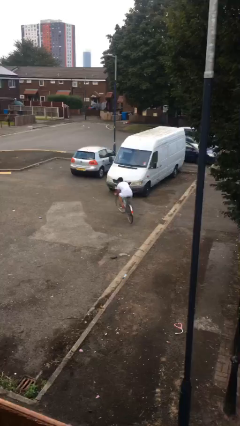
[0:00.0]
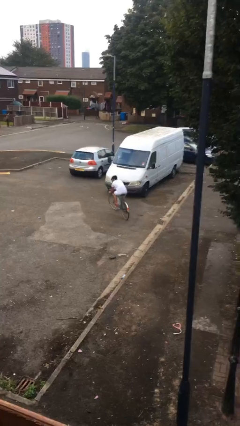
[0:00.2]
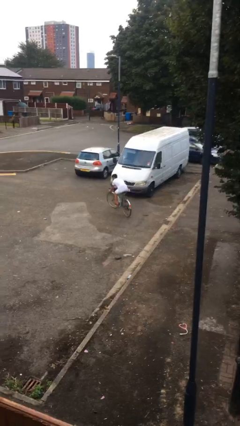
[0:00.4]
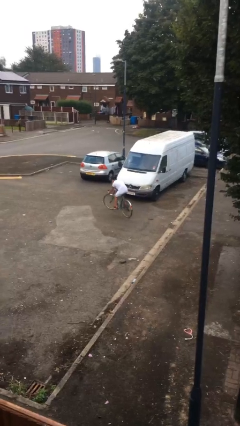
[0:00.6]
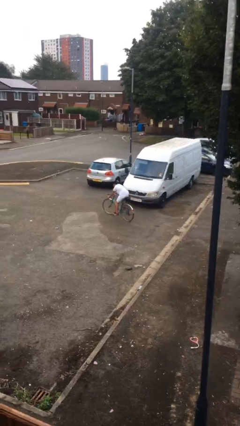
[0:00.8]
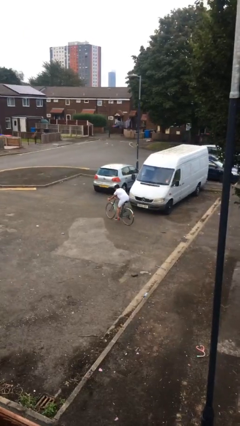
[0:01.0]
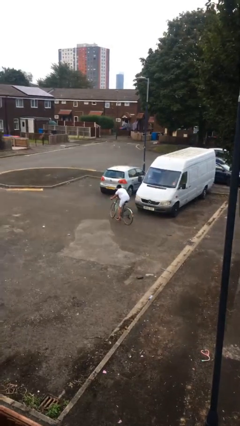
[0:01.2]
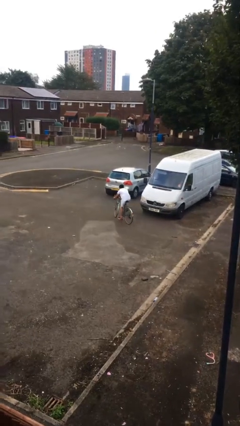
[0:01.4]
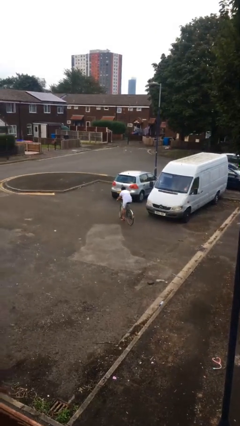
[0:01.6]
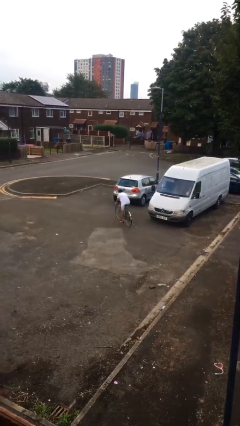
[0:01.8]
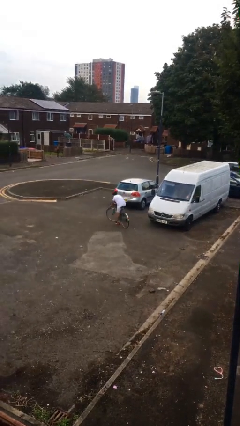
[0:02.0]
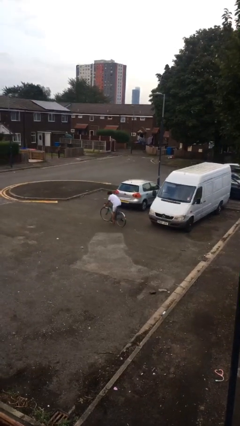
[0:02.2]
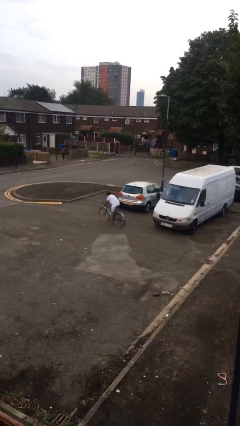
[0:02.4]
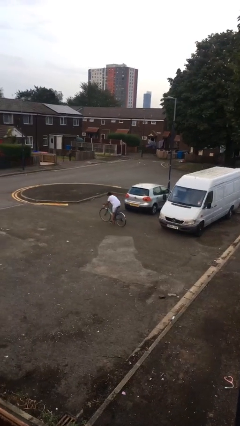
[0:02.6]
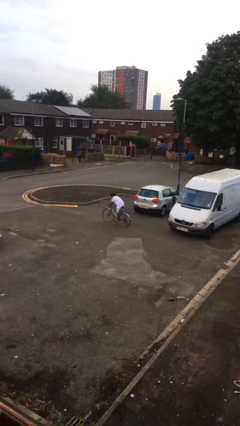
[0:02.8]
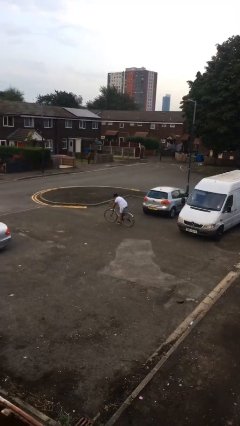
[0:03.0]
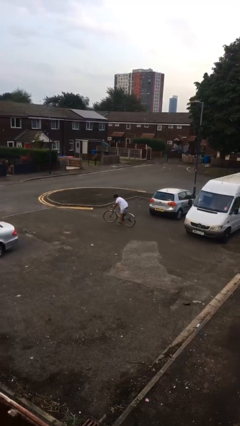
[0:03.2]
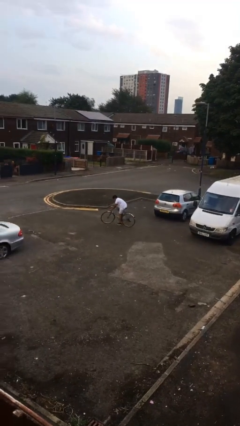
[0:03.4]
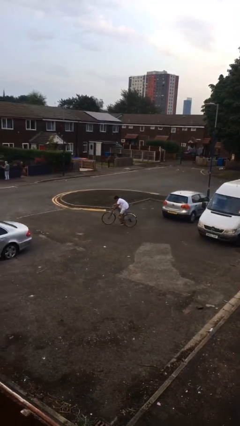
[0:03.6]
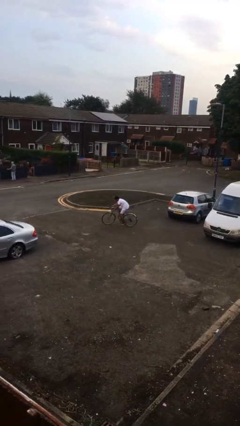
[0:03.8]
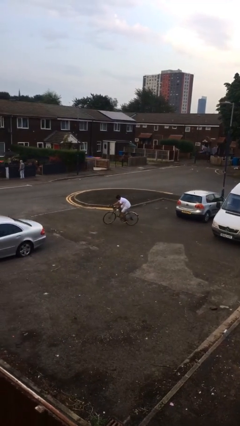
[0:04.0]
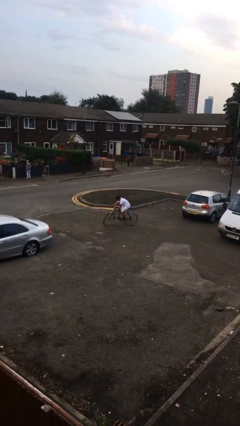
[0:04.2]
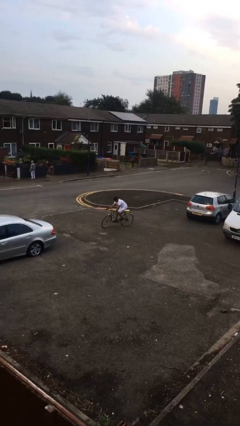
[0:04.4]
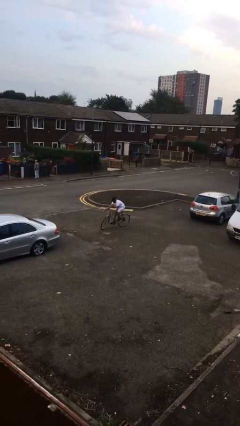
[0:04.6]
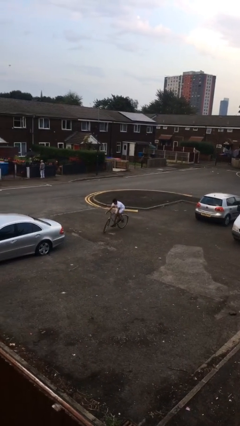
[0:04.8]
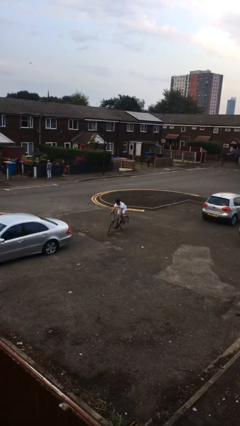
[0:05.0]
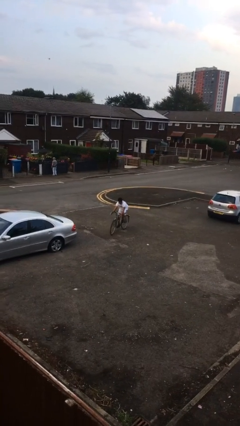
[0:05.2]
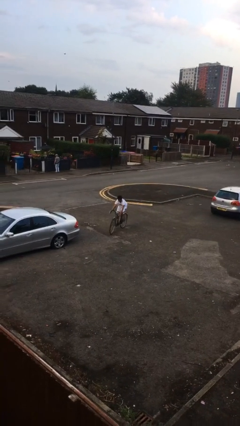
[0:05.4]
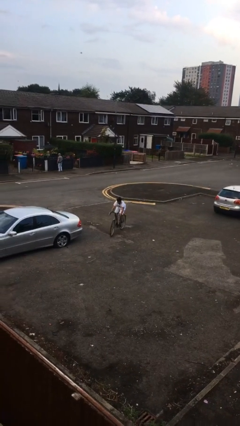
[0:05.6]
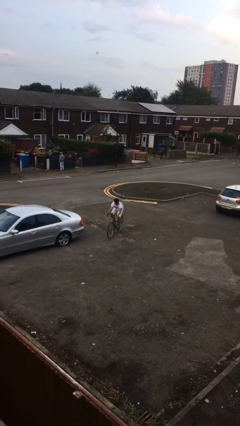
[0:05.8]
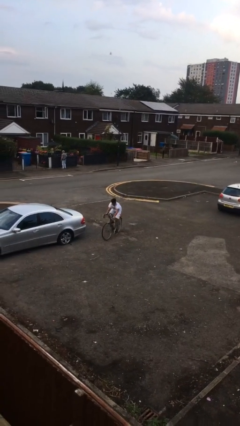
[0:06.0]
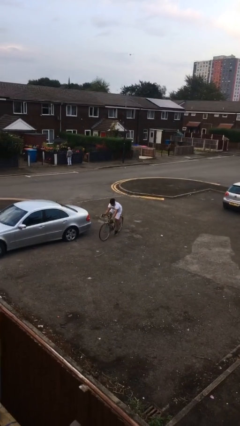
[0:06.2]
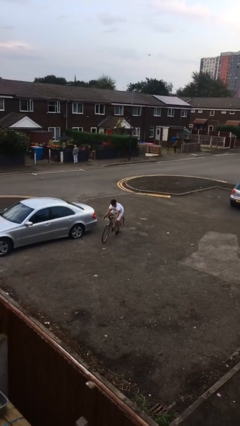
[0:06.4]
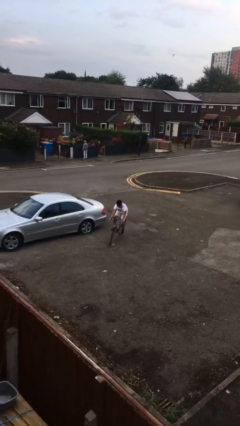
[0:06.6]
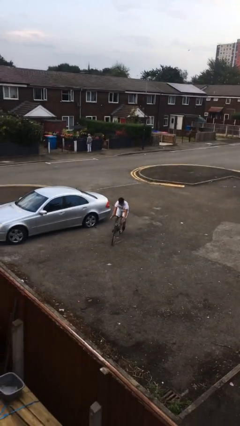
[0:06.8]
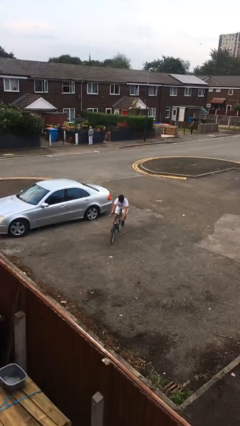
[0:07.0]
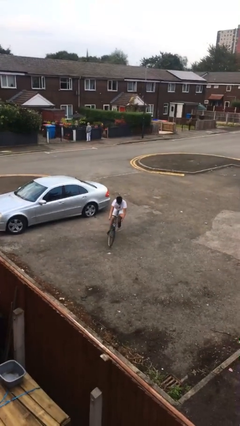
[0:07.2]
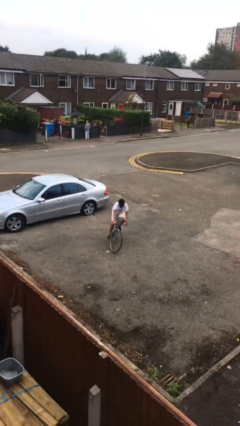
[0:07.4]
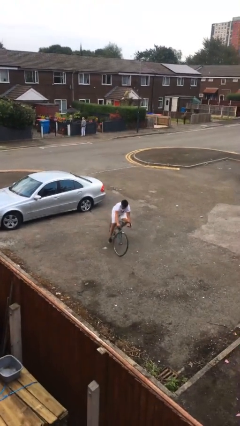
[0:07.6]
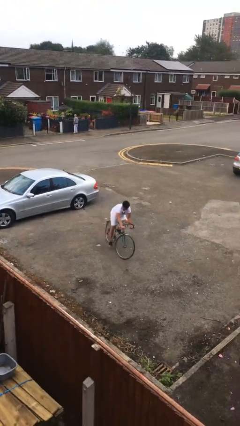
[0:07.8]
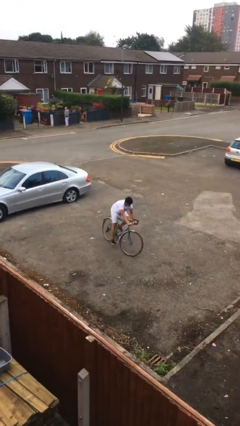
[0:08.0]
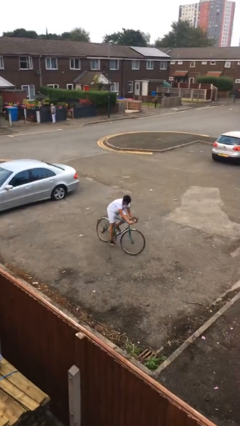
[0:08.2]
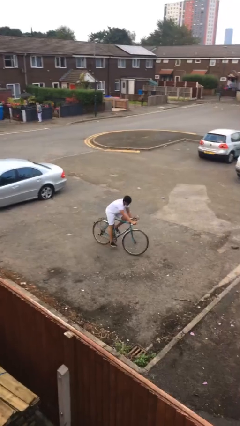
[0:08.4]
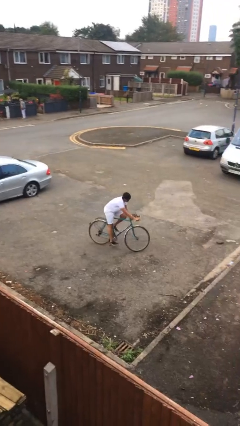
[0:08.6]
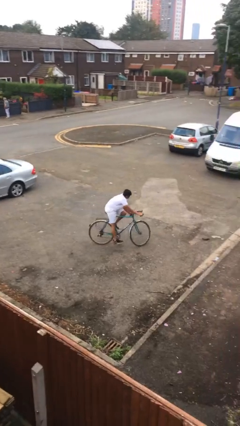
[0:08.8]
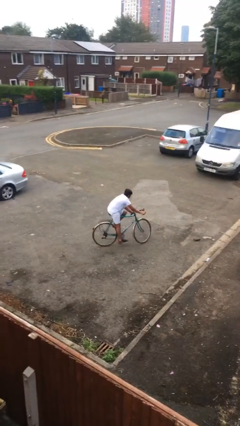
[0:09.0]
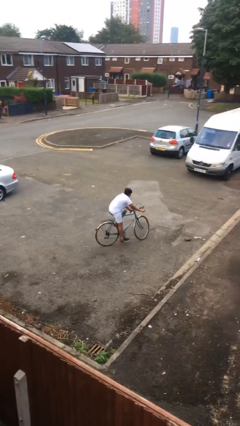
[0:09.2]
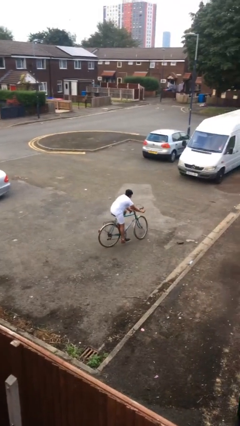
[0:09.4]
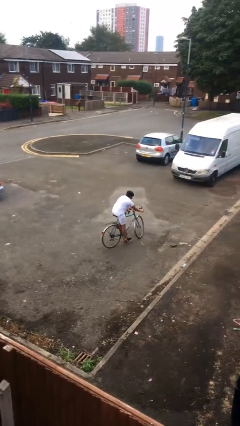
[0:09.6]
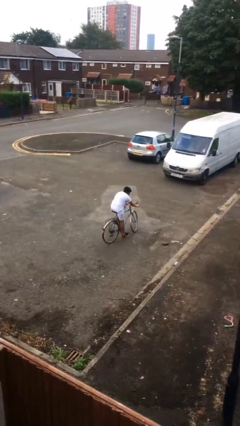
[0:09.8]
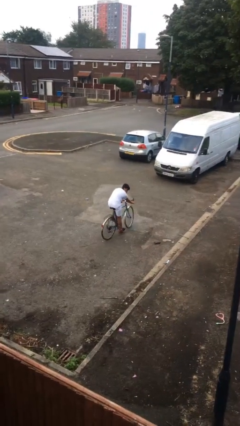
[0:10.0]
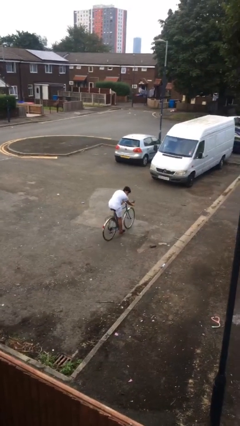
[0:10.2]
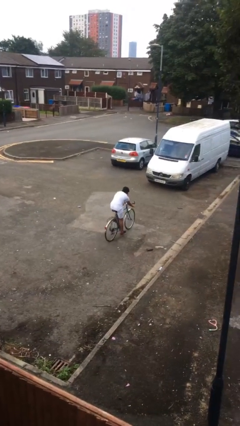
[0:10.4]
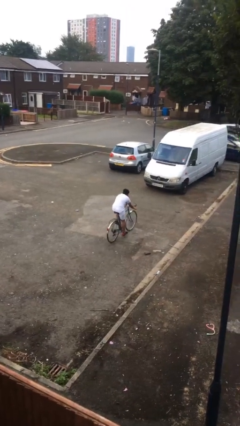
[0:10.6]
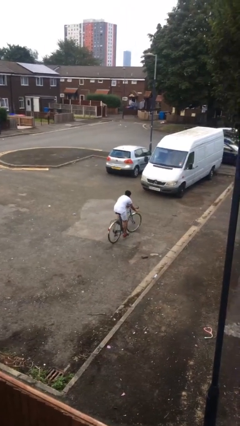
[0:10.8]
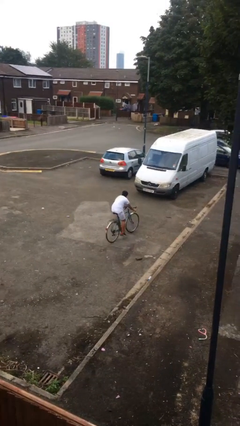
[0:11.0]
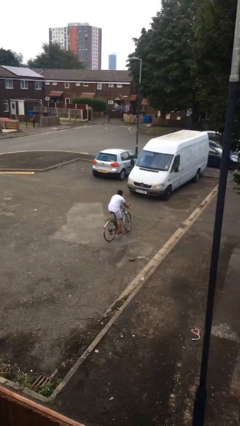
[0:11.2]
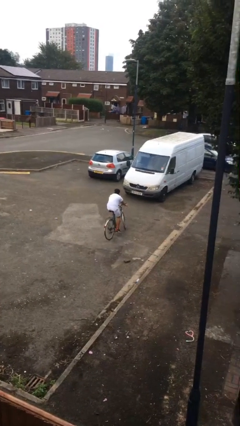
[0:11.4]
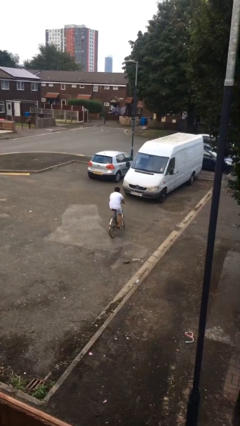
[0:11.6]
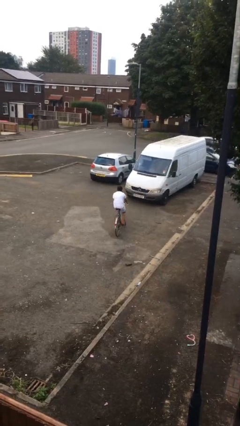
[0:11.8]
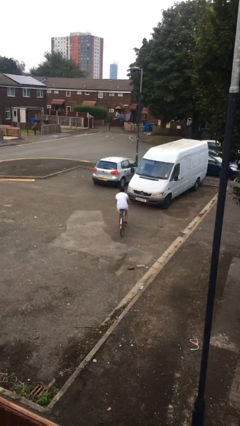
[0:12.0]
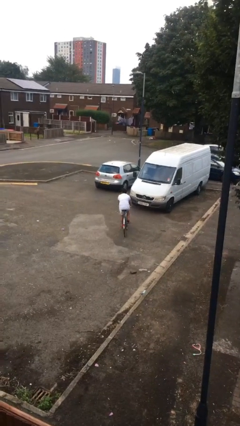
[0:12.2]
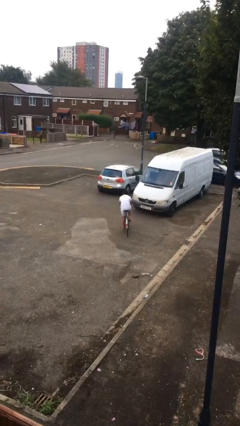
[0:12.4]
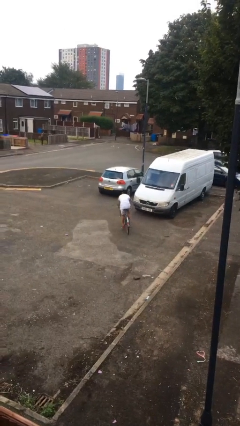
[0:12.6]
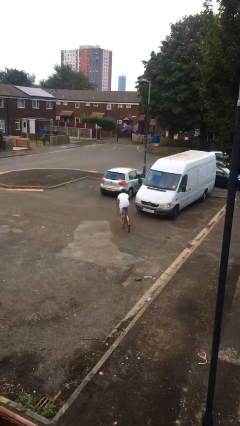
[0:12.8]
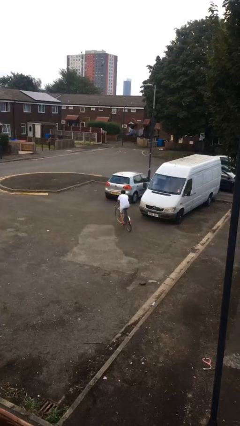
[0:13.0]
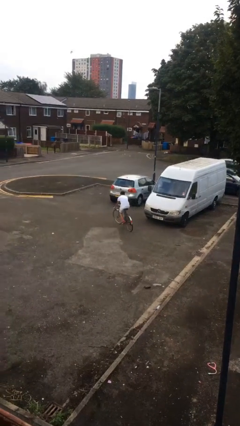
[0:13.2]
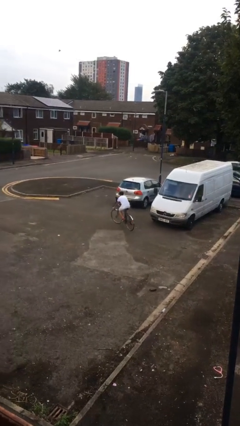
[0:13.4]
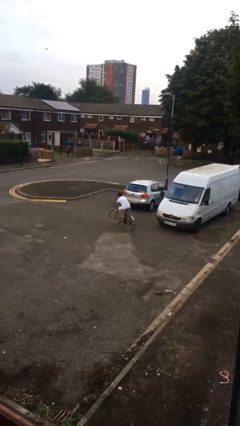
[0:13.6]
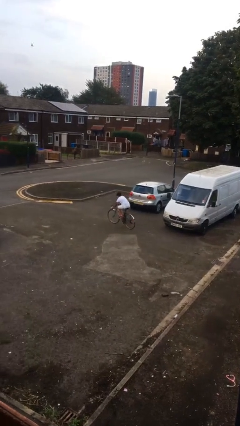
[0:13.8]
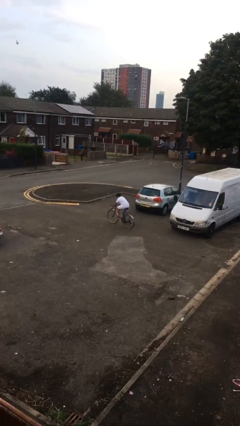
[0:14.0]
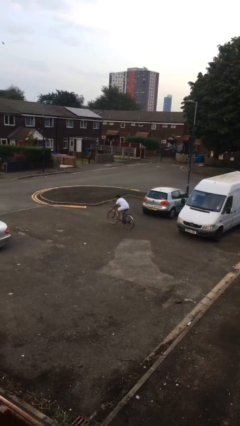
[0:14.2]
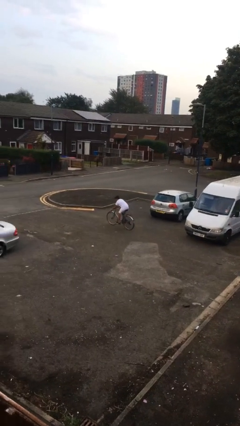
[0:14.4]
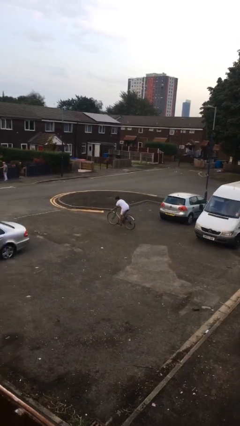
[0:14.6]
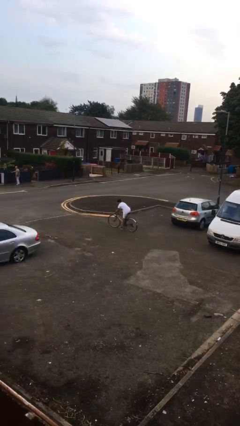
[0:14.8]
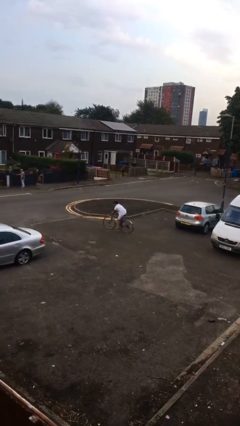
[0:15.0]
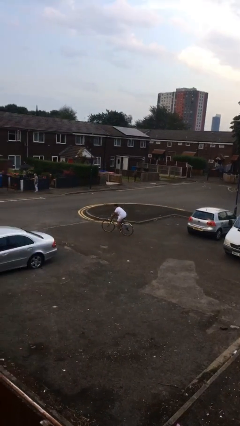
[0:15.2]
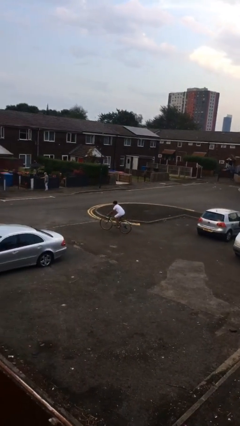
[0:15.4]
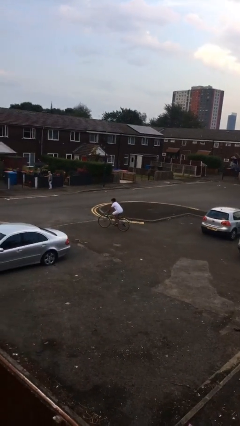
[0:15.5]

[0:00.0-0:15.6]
person rides bicycle

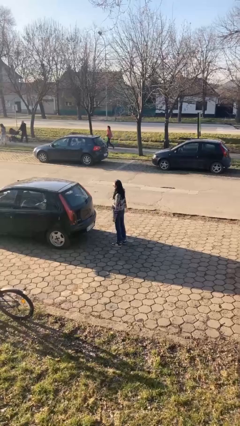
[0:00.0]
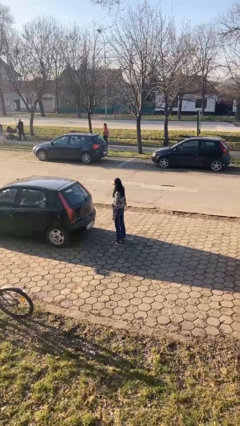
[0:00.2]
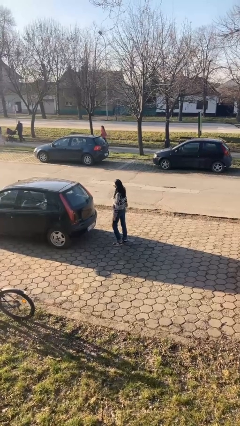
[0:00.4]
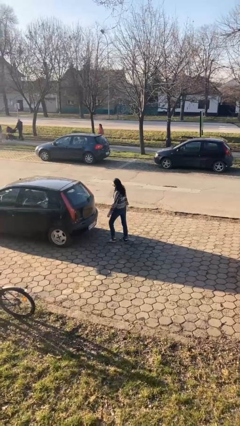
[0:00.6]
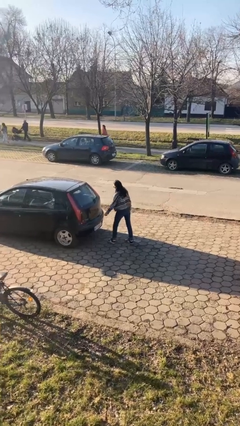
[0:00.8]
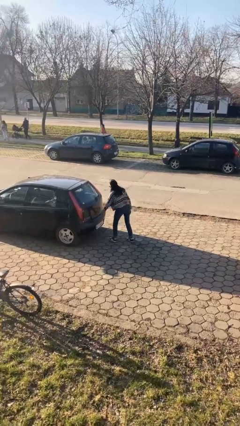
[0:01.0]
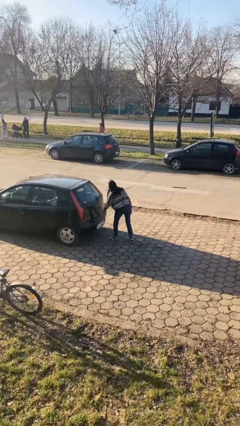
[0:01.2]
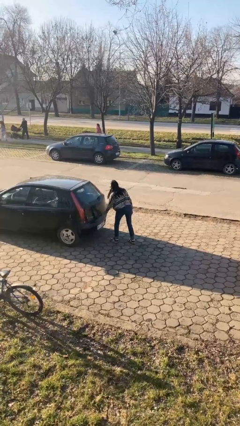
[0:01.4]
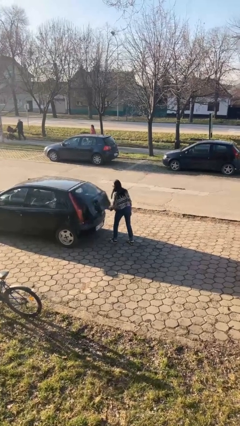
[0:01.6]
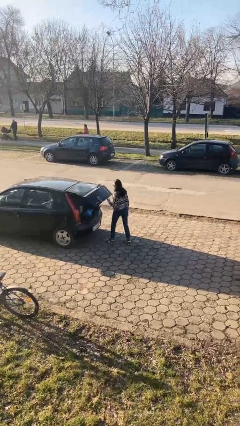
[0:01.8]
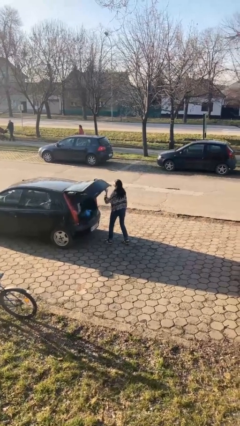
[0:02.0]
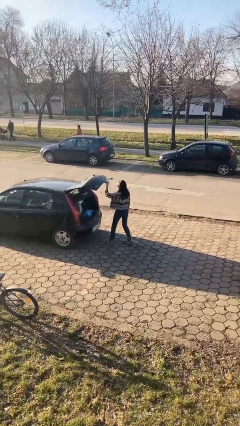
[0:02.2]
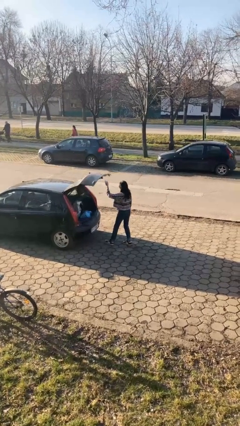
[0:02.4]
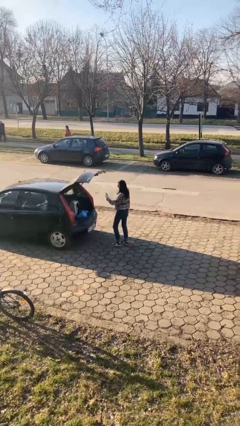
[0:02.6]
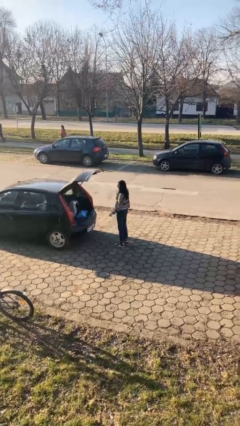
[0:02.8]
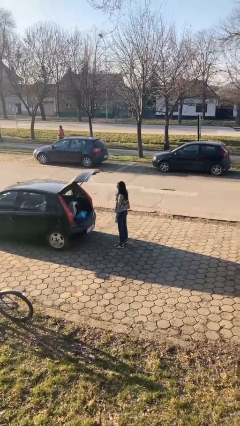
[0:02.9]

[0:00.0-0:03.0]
person opens car trunk
